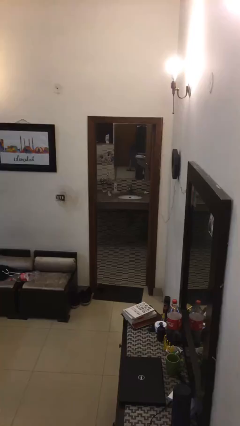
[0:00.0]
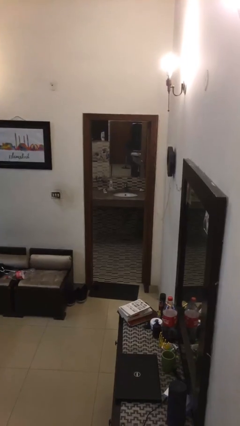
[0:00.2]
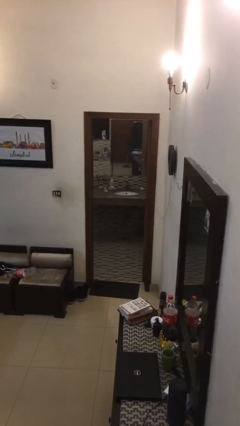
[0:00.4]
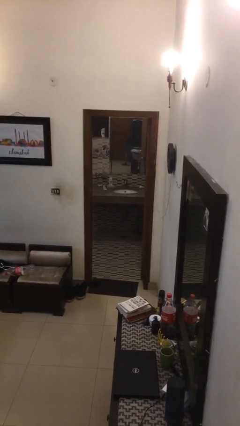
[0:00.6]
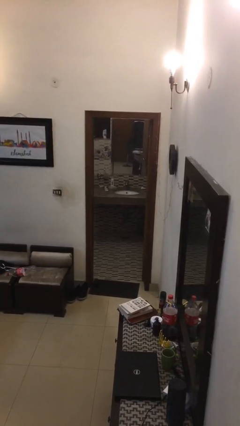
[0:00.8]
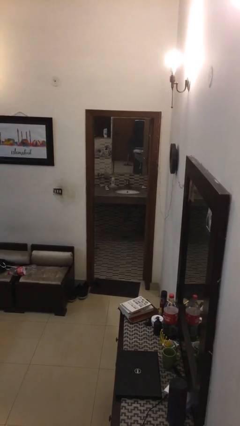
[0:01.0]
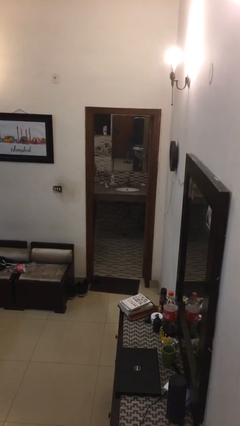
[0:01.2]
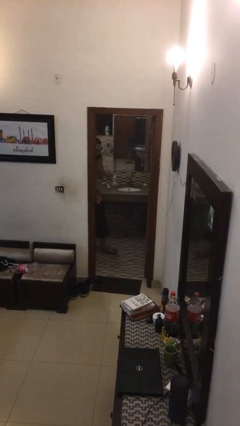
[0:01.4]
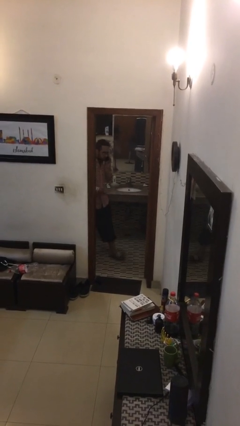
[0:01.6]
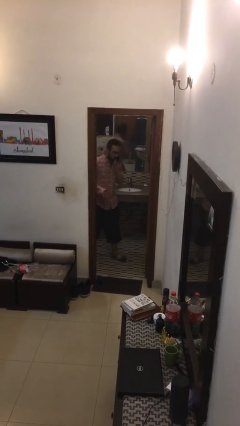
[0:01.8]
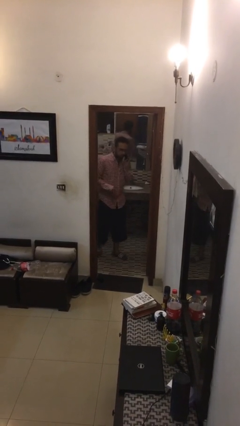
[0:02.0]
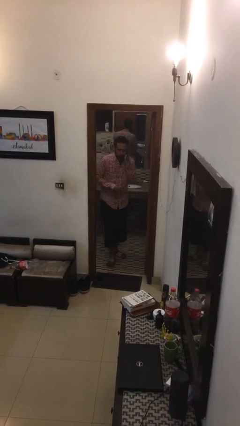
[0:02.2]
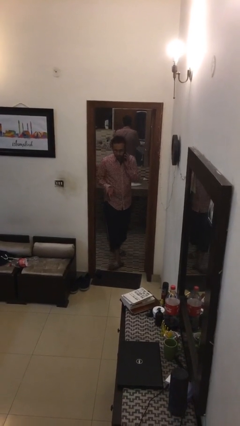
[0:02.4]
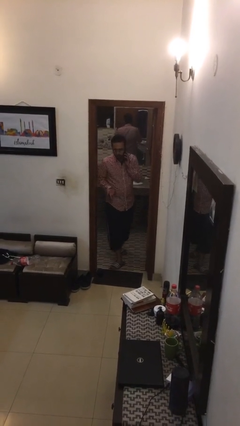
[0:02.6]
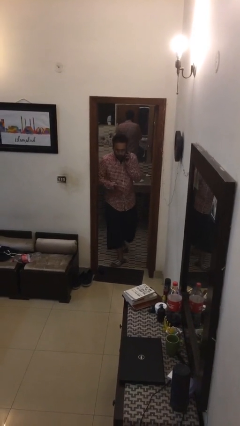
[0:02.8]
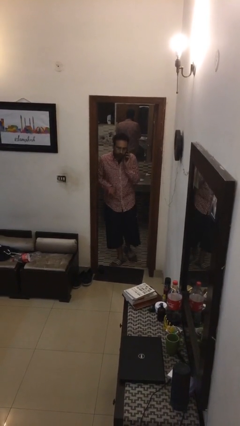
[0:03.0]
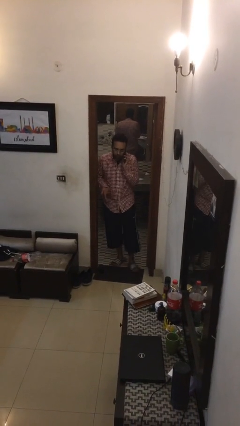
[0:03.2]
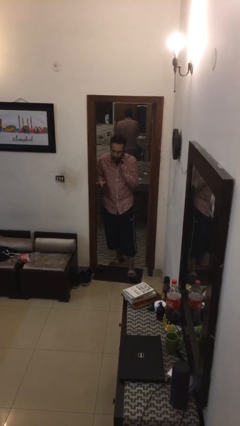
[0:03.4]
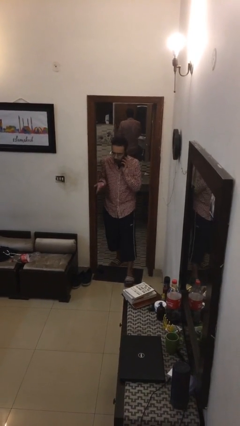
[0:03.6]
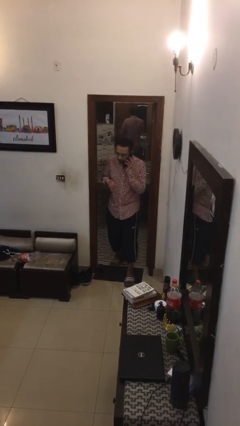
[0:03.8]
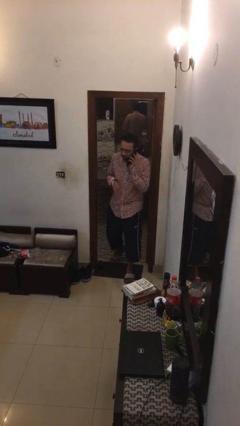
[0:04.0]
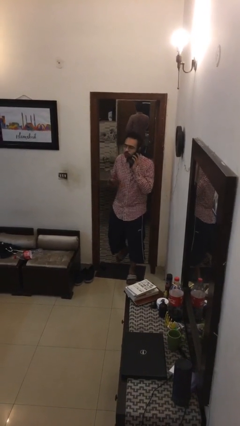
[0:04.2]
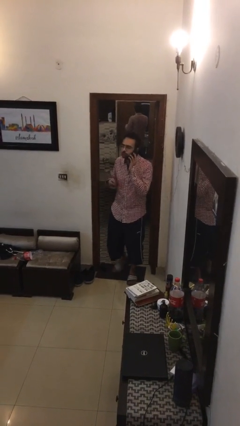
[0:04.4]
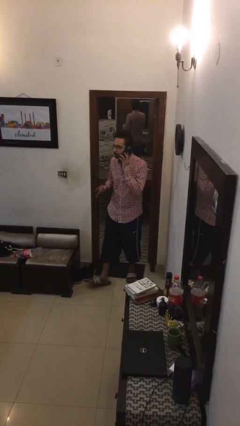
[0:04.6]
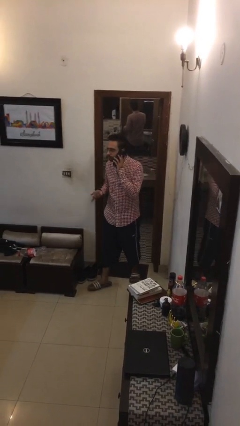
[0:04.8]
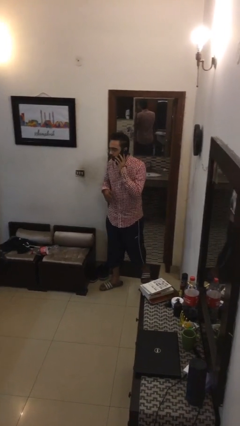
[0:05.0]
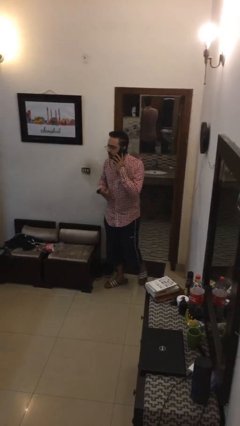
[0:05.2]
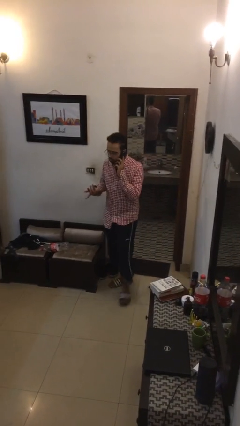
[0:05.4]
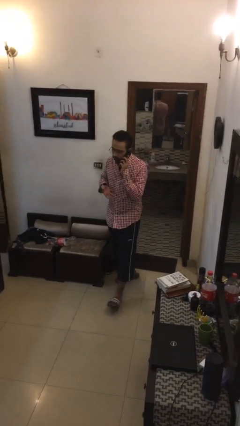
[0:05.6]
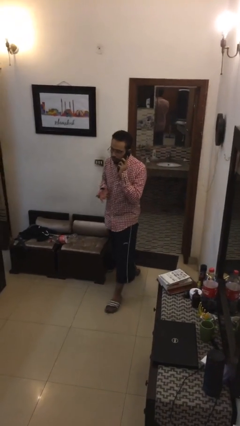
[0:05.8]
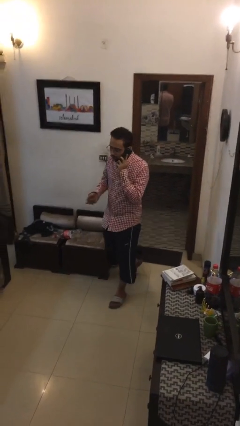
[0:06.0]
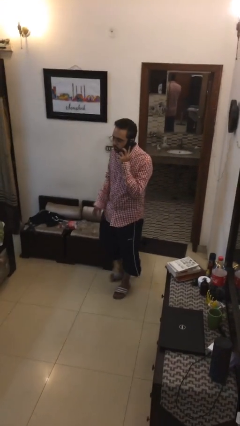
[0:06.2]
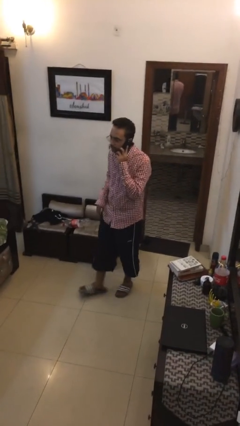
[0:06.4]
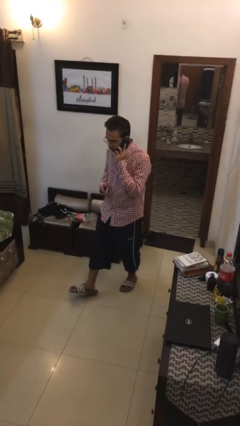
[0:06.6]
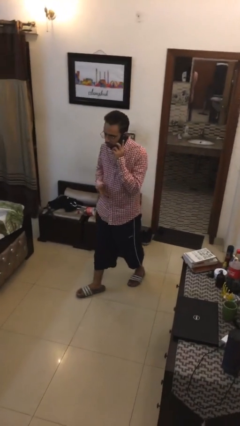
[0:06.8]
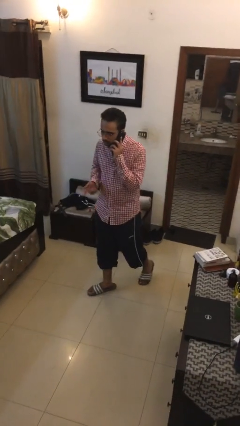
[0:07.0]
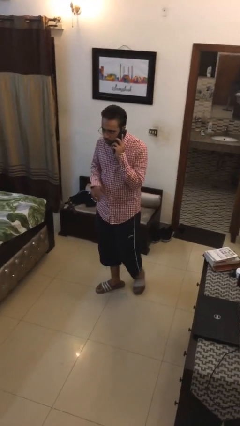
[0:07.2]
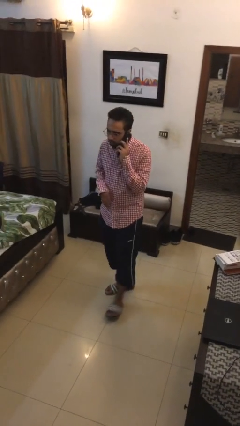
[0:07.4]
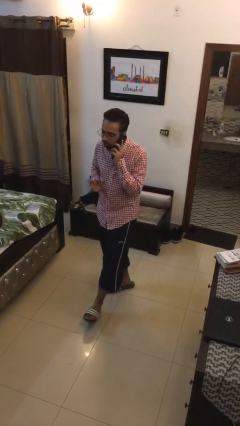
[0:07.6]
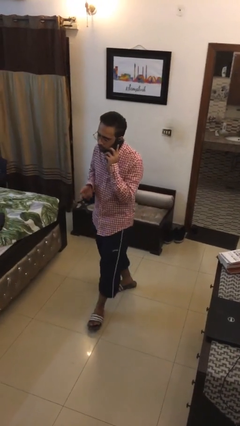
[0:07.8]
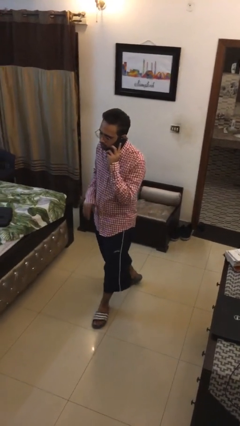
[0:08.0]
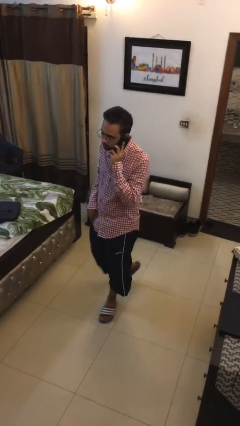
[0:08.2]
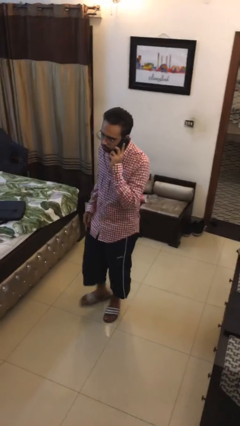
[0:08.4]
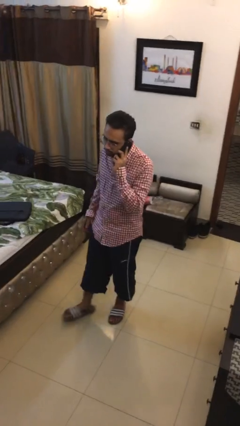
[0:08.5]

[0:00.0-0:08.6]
person enters scene through structure

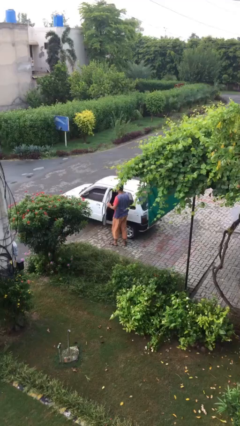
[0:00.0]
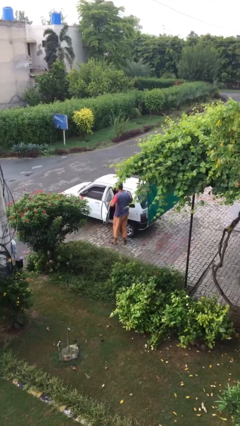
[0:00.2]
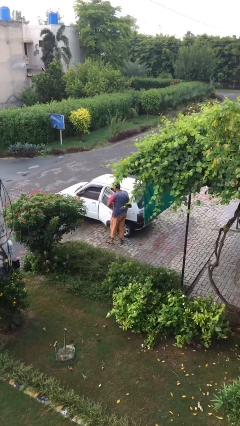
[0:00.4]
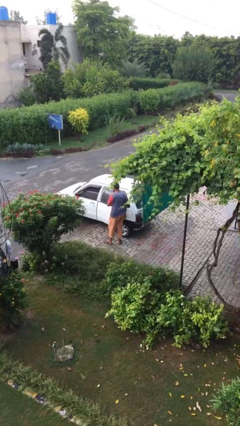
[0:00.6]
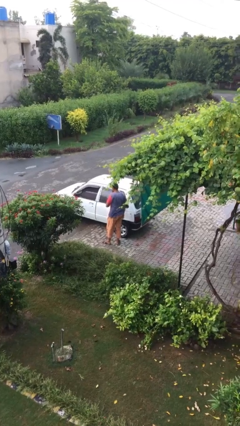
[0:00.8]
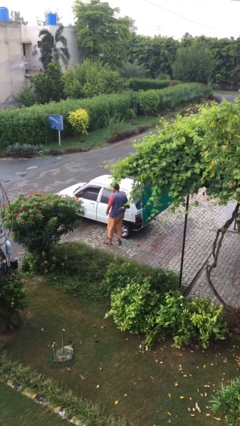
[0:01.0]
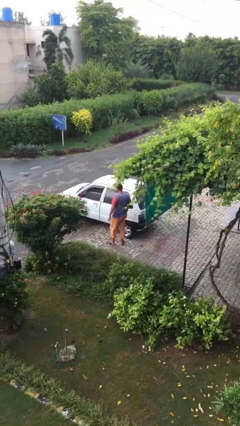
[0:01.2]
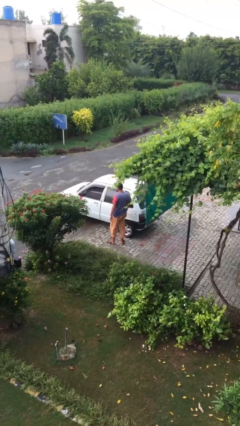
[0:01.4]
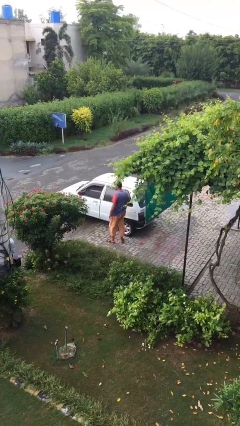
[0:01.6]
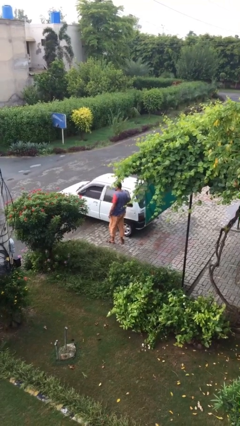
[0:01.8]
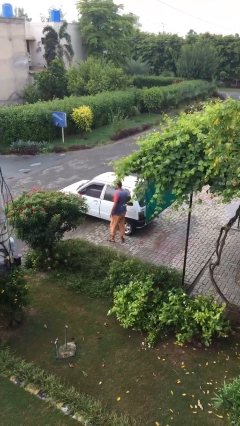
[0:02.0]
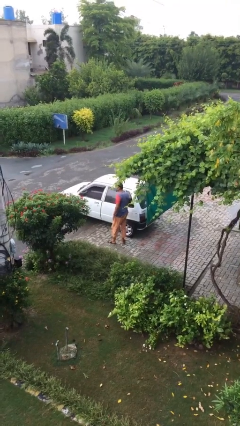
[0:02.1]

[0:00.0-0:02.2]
person closes car door

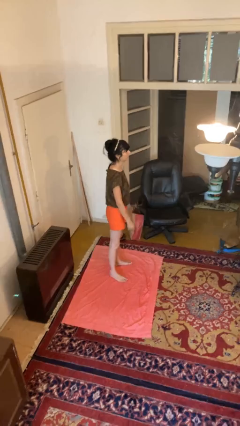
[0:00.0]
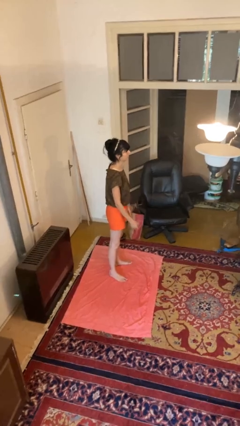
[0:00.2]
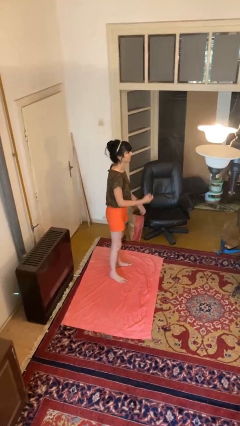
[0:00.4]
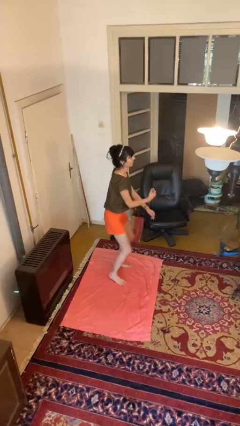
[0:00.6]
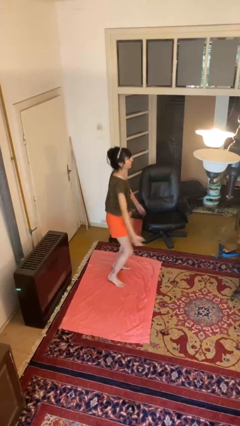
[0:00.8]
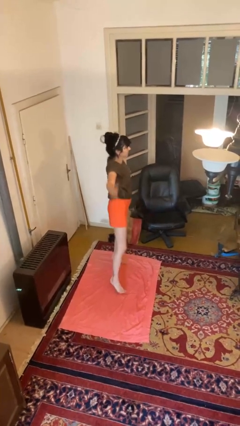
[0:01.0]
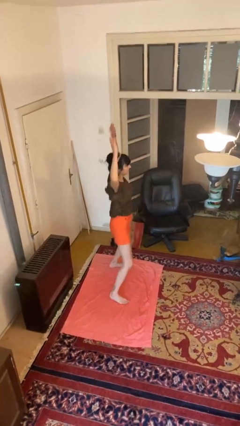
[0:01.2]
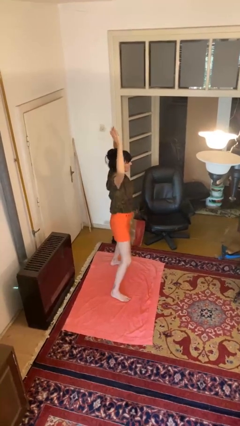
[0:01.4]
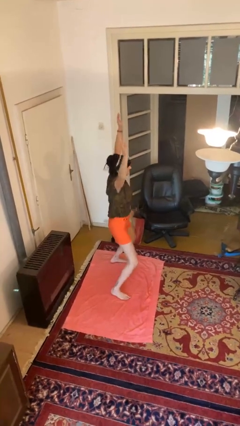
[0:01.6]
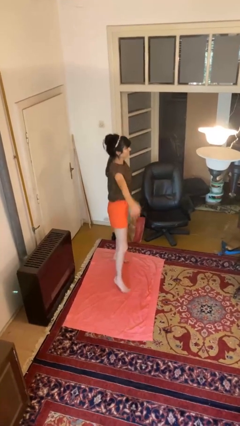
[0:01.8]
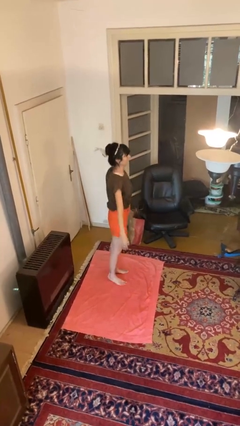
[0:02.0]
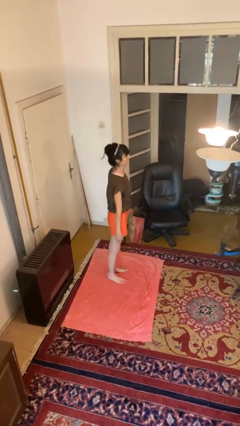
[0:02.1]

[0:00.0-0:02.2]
person exercises with jumping jacks

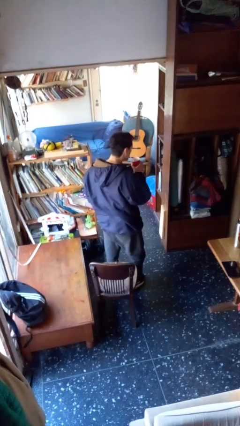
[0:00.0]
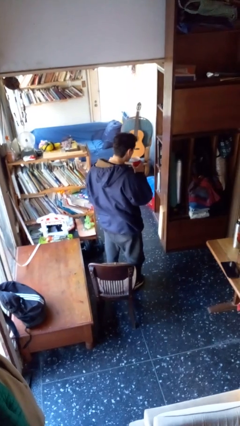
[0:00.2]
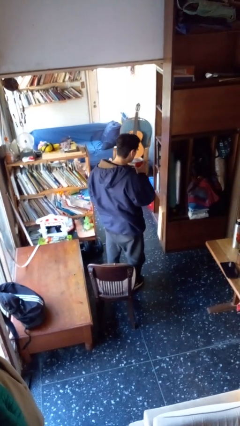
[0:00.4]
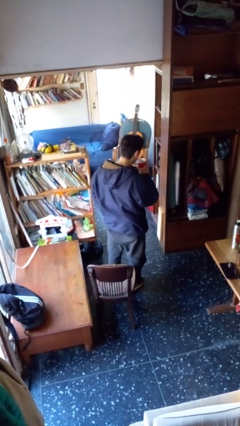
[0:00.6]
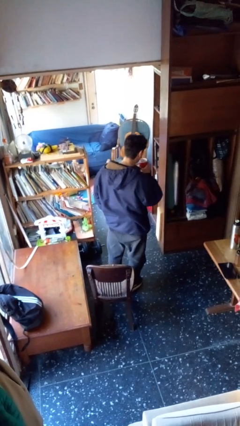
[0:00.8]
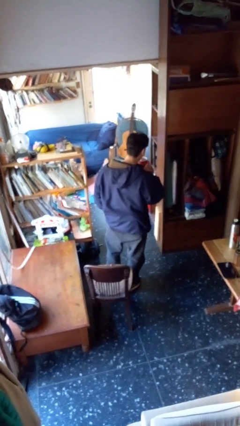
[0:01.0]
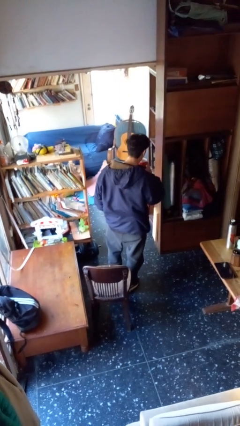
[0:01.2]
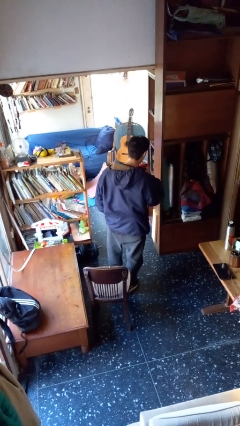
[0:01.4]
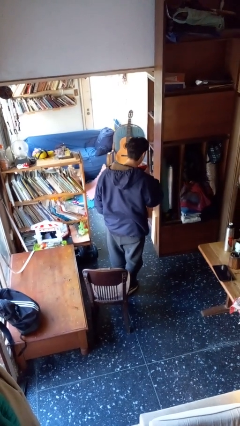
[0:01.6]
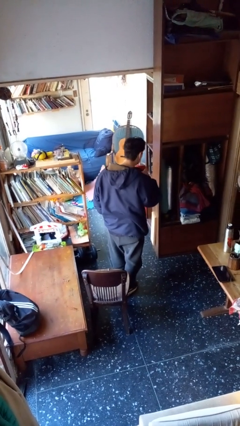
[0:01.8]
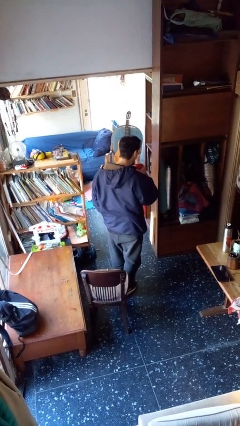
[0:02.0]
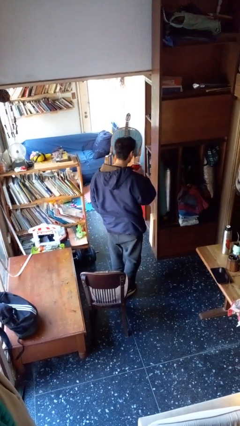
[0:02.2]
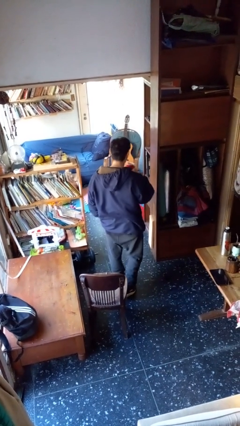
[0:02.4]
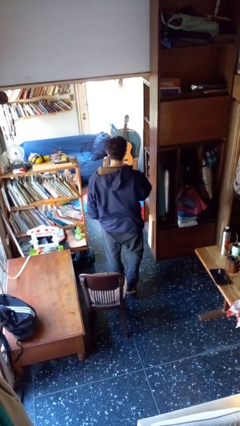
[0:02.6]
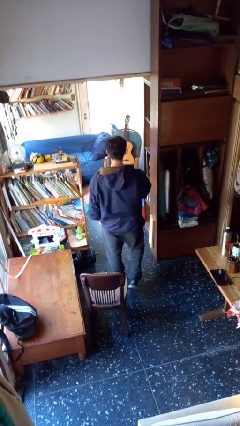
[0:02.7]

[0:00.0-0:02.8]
person drinks from straw

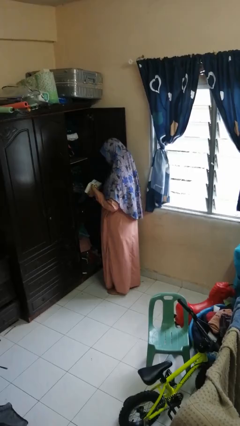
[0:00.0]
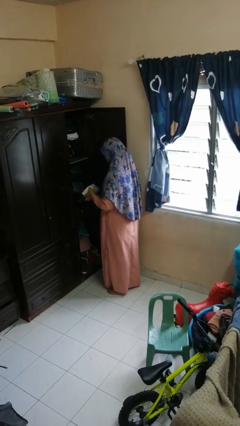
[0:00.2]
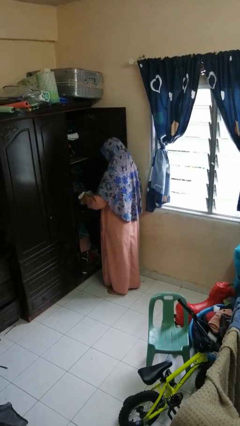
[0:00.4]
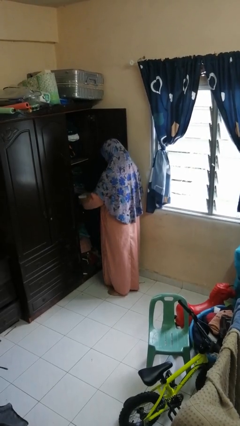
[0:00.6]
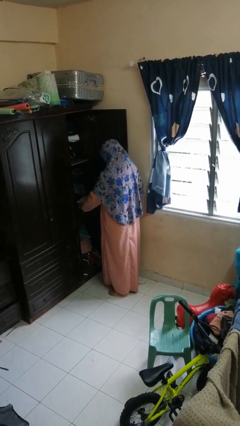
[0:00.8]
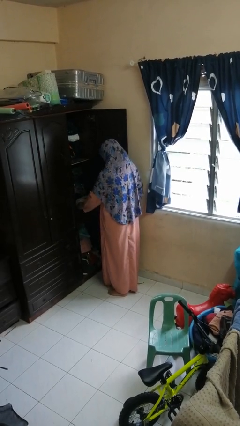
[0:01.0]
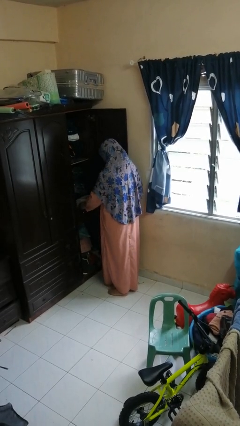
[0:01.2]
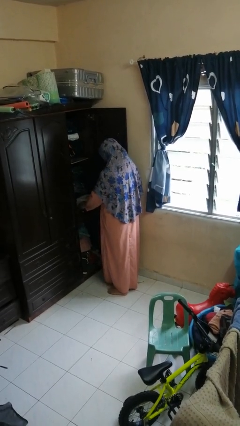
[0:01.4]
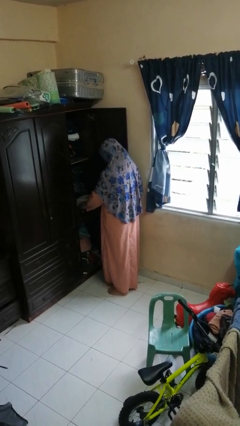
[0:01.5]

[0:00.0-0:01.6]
person puts down object into cabinet
